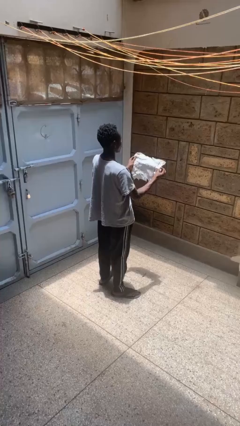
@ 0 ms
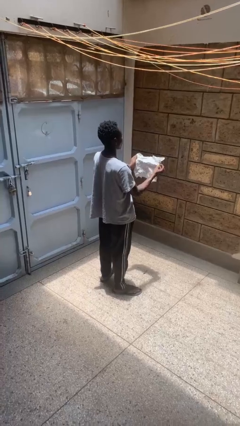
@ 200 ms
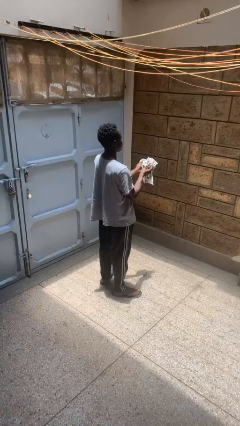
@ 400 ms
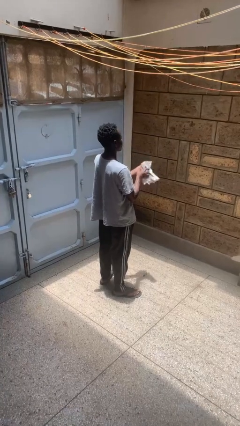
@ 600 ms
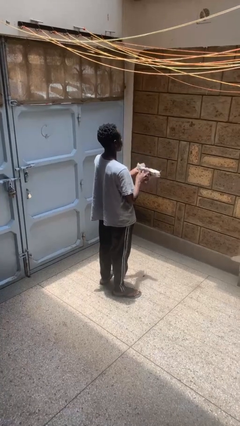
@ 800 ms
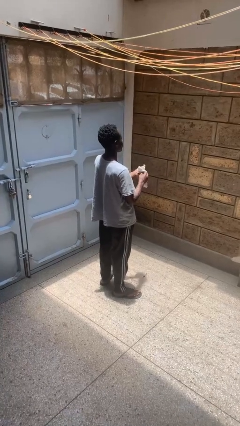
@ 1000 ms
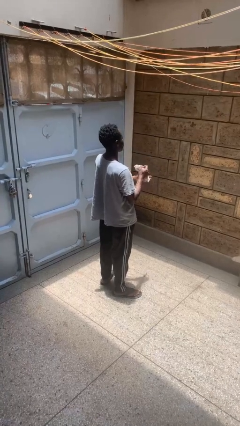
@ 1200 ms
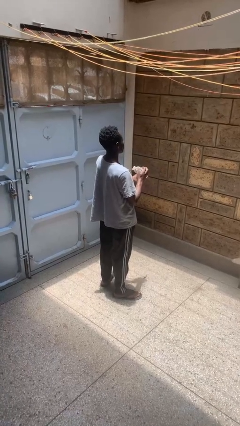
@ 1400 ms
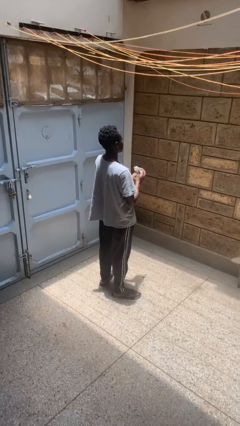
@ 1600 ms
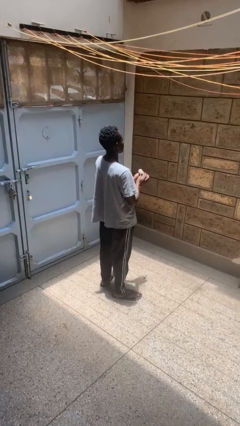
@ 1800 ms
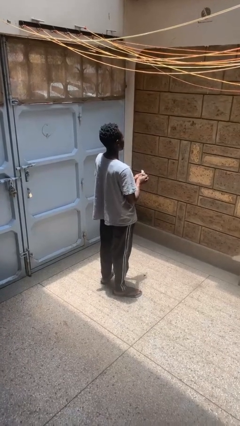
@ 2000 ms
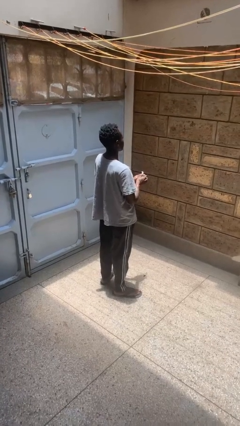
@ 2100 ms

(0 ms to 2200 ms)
person crumples paper

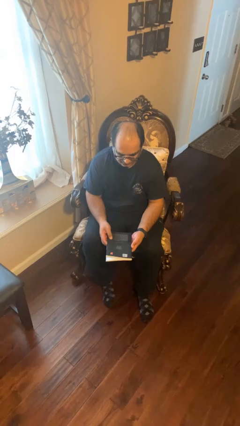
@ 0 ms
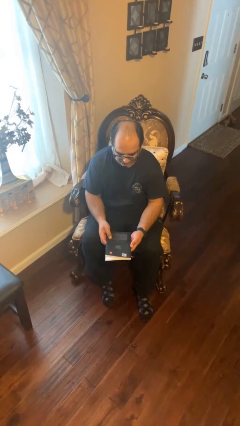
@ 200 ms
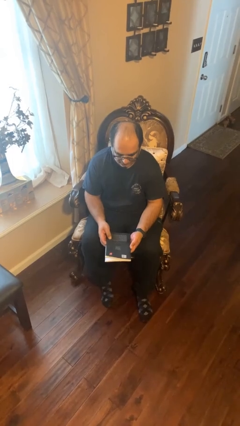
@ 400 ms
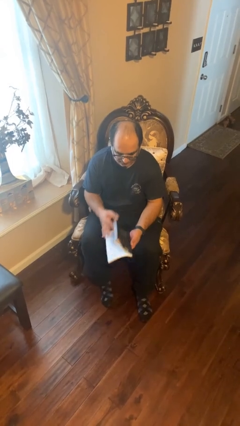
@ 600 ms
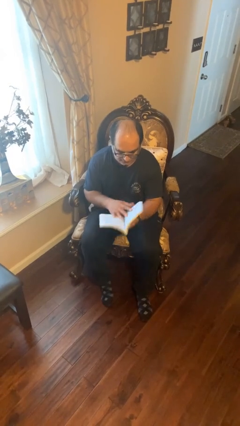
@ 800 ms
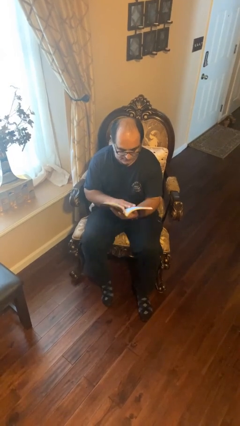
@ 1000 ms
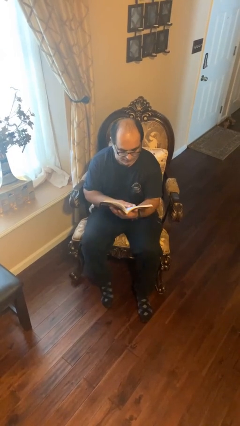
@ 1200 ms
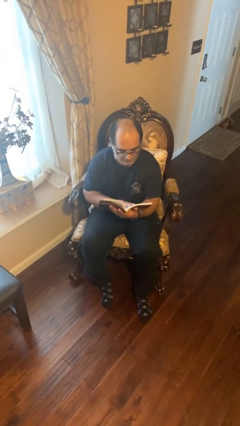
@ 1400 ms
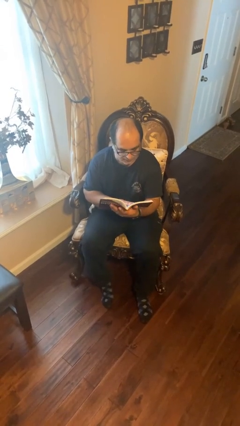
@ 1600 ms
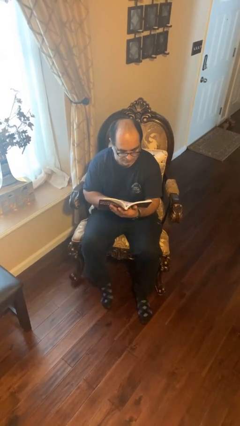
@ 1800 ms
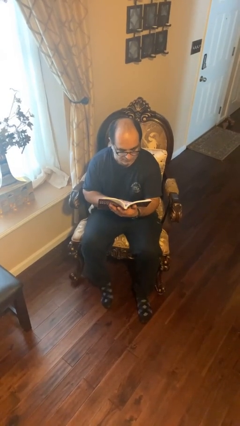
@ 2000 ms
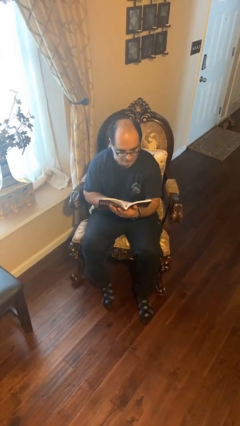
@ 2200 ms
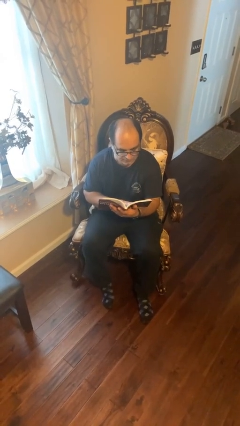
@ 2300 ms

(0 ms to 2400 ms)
person reads document

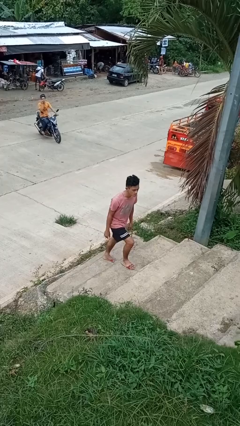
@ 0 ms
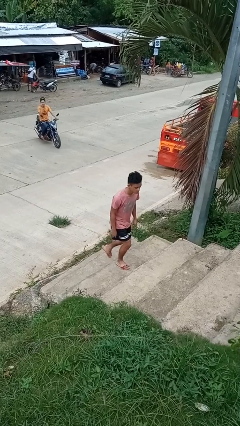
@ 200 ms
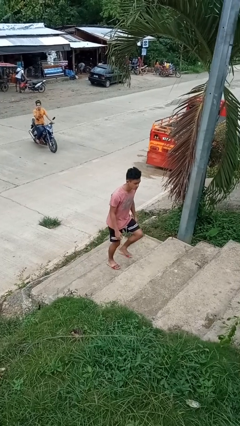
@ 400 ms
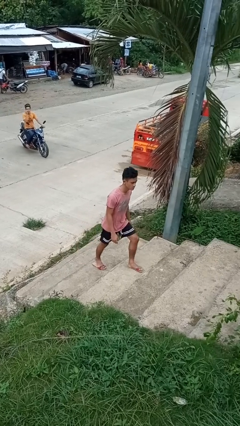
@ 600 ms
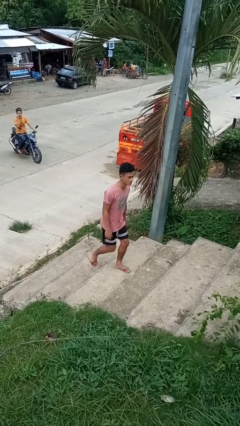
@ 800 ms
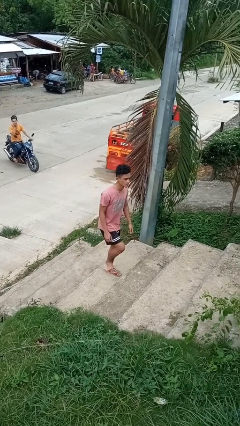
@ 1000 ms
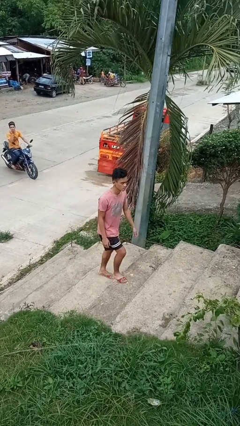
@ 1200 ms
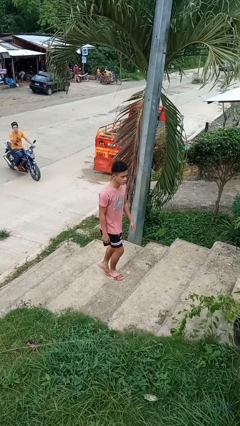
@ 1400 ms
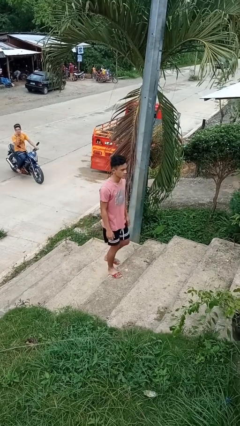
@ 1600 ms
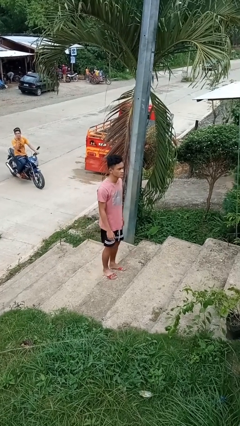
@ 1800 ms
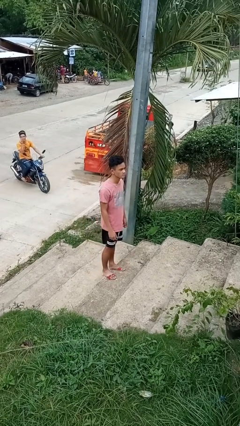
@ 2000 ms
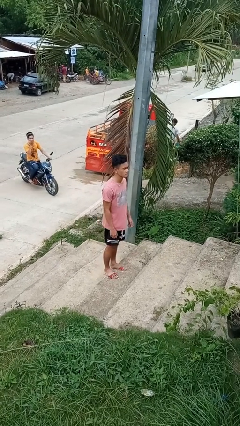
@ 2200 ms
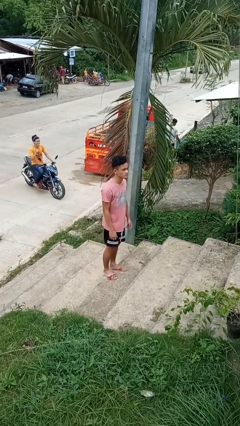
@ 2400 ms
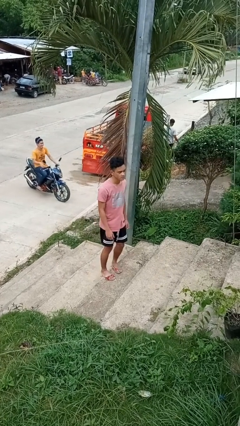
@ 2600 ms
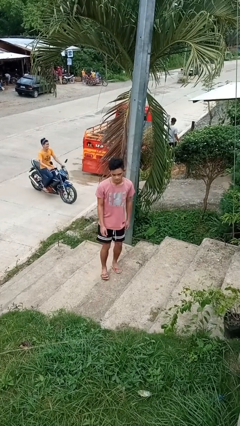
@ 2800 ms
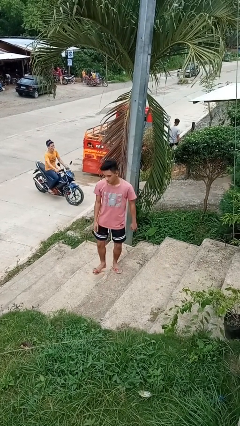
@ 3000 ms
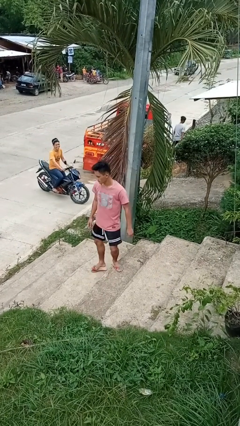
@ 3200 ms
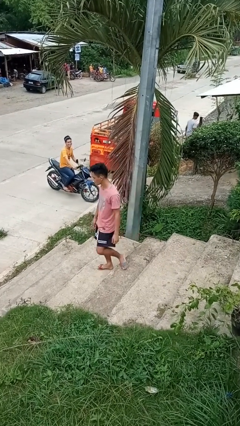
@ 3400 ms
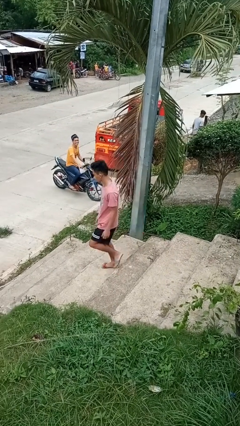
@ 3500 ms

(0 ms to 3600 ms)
person climbs up stairs

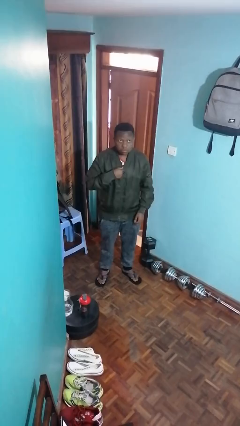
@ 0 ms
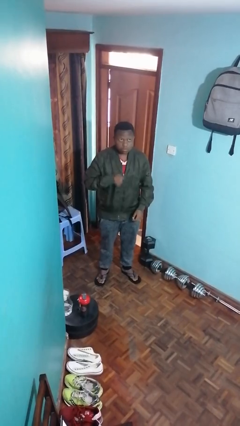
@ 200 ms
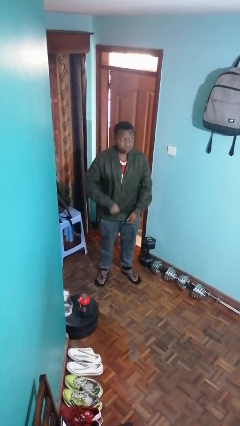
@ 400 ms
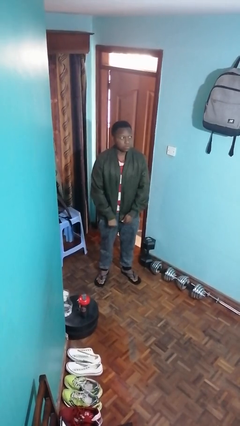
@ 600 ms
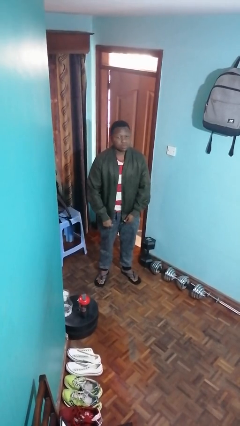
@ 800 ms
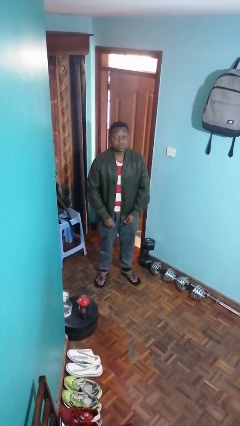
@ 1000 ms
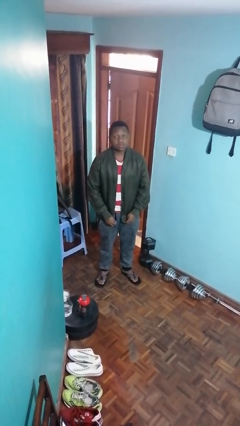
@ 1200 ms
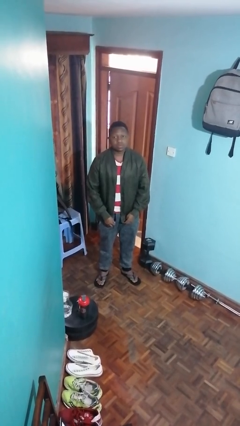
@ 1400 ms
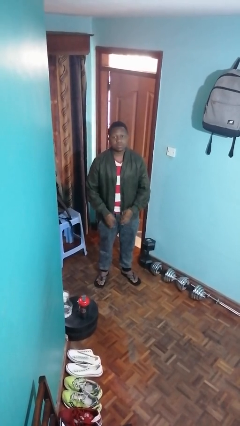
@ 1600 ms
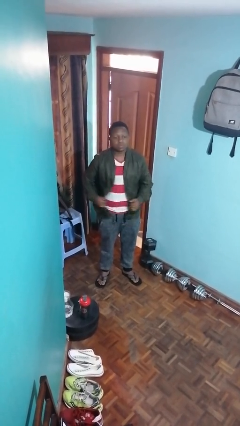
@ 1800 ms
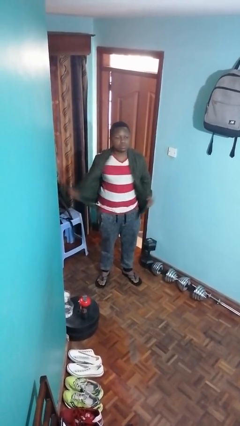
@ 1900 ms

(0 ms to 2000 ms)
person unzips jacket

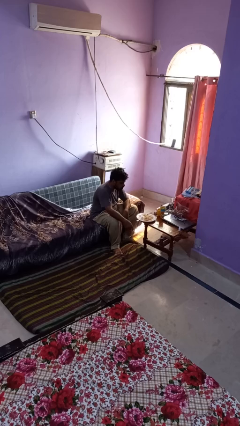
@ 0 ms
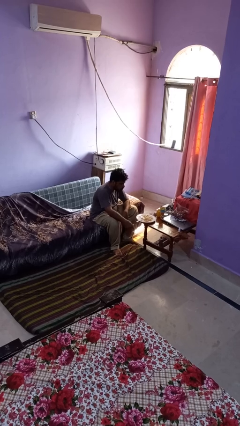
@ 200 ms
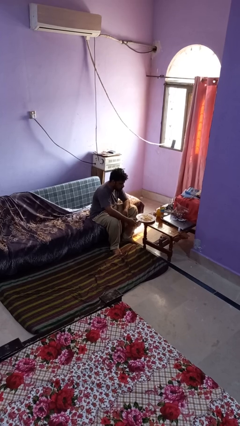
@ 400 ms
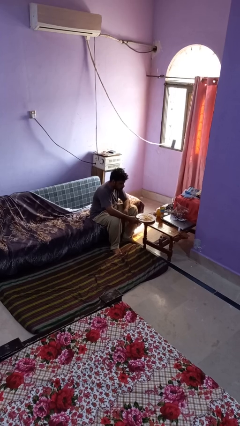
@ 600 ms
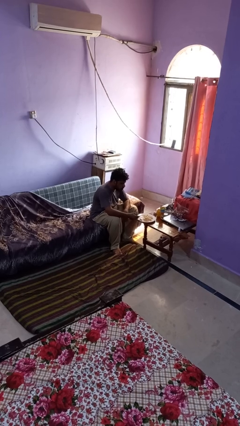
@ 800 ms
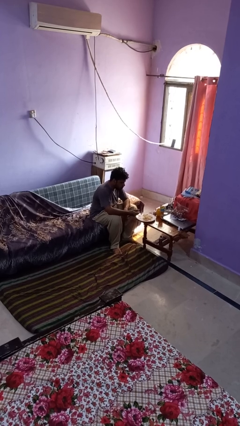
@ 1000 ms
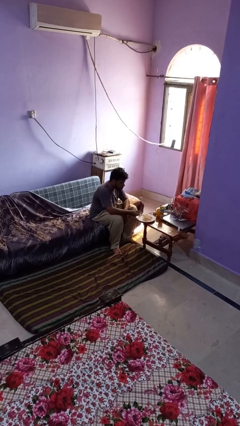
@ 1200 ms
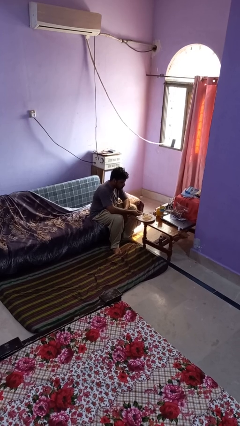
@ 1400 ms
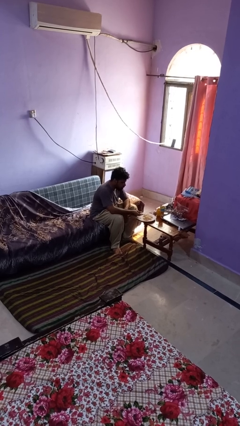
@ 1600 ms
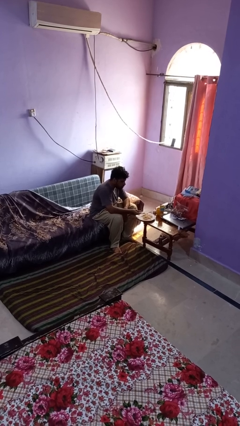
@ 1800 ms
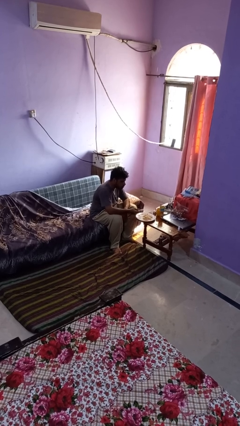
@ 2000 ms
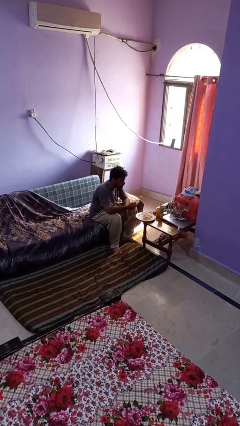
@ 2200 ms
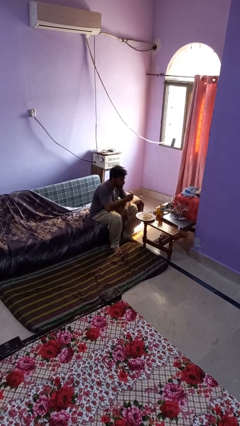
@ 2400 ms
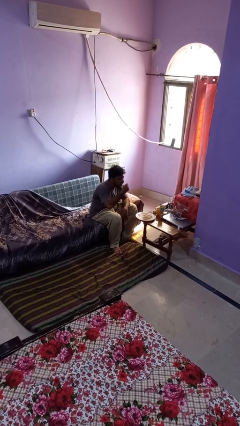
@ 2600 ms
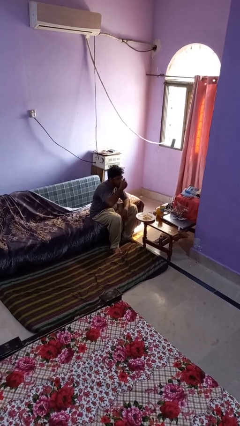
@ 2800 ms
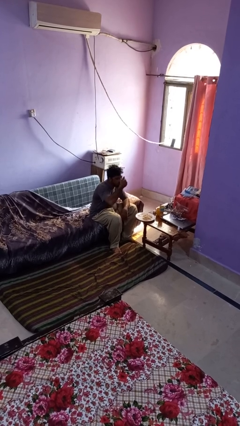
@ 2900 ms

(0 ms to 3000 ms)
person eats with utensil

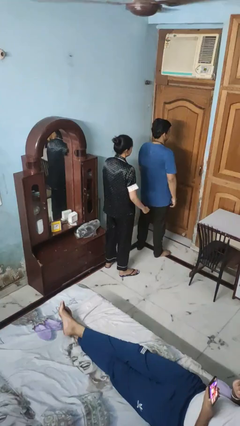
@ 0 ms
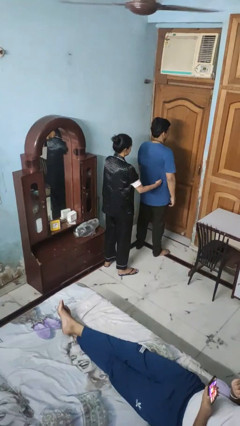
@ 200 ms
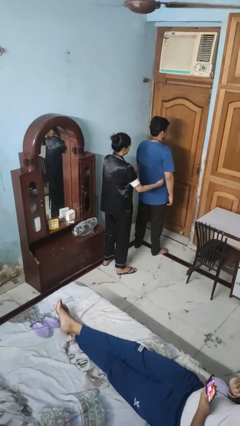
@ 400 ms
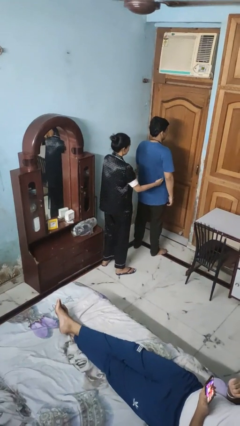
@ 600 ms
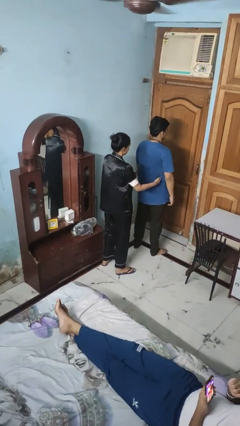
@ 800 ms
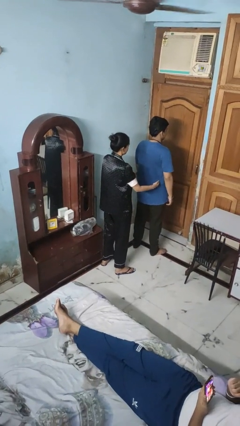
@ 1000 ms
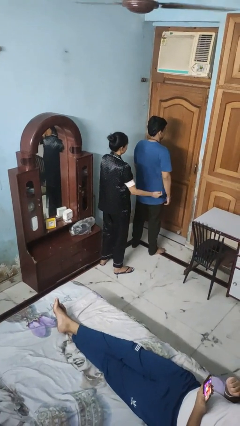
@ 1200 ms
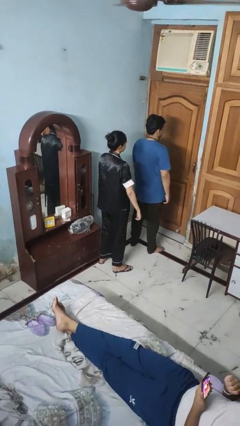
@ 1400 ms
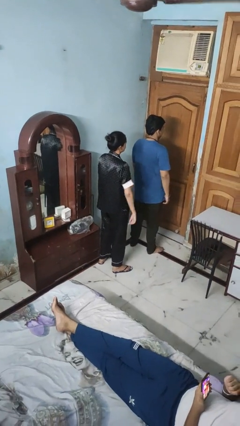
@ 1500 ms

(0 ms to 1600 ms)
person tickles person

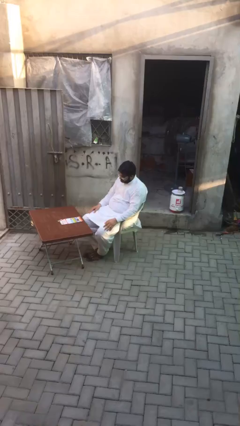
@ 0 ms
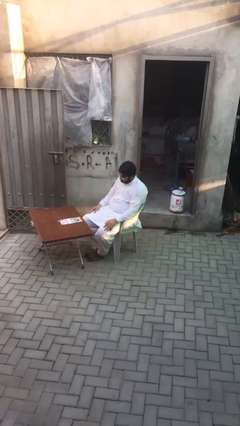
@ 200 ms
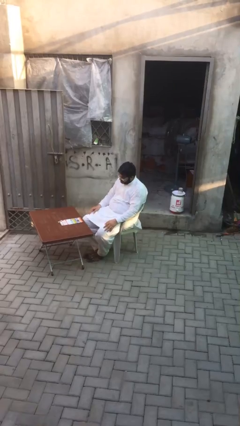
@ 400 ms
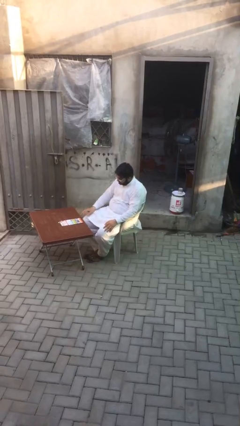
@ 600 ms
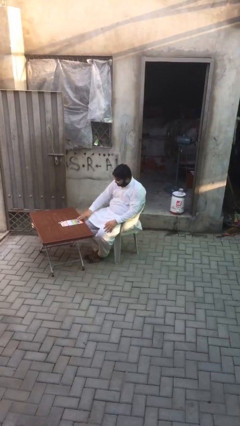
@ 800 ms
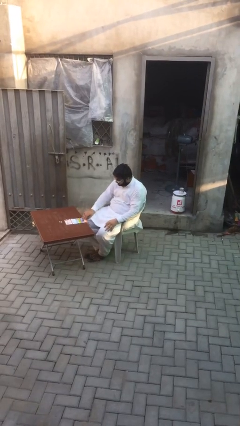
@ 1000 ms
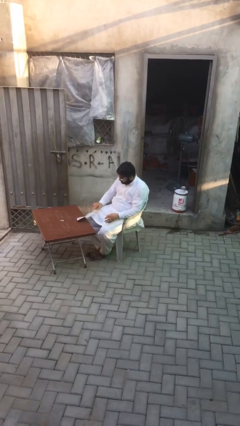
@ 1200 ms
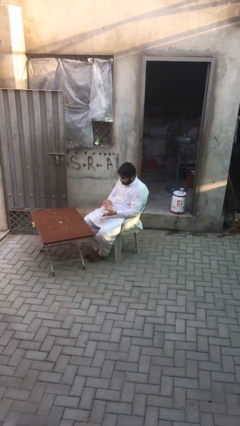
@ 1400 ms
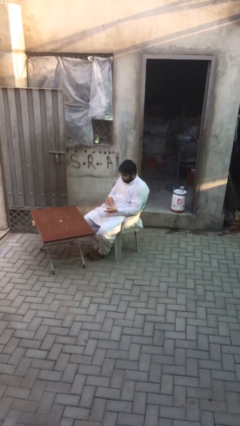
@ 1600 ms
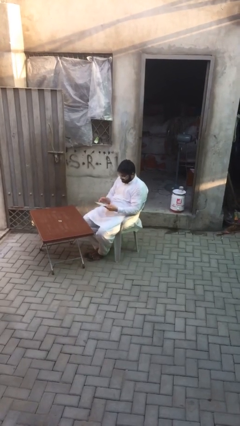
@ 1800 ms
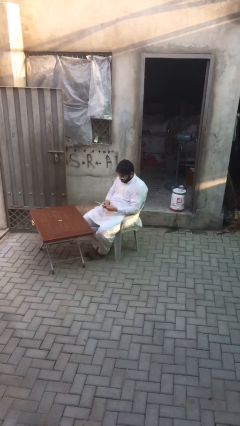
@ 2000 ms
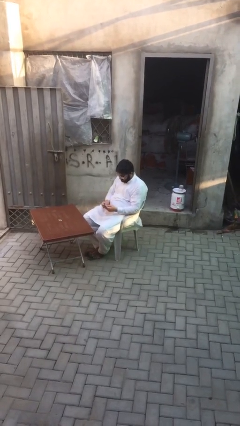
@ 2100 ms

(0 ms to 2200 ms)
person picks up object from table
